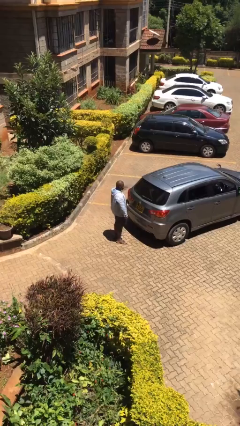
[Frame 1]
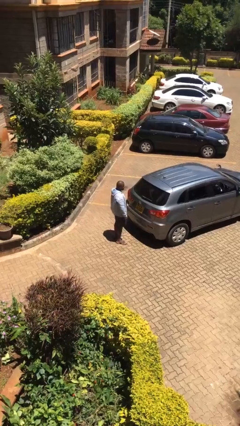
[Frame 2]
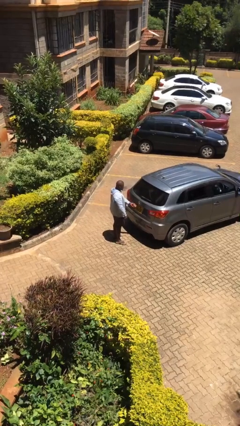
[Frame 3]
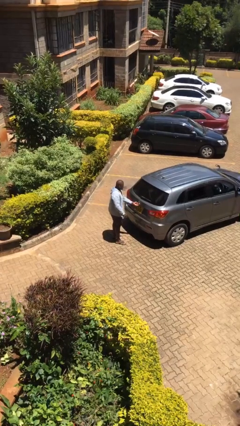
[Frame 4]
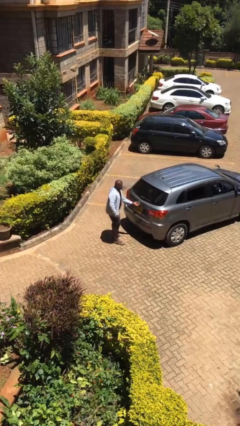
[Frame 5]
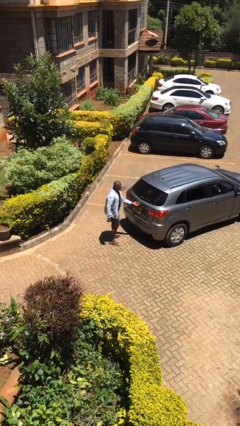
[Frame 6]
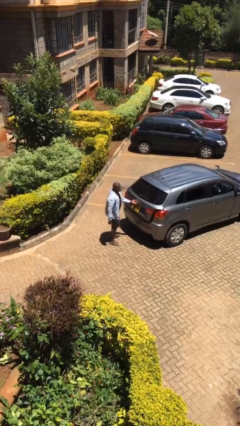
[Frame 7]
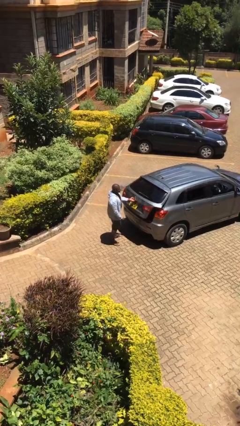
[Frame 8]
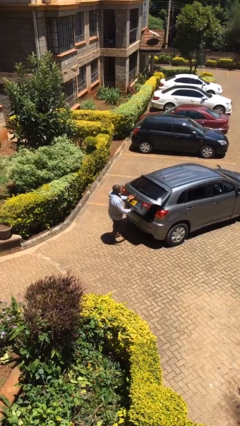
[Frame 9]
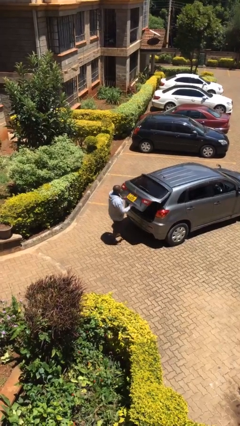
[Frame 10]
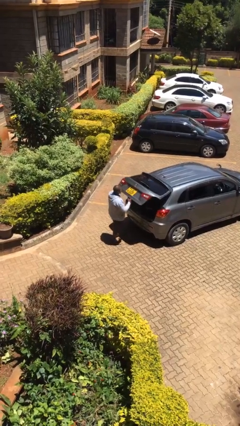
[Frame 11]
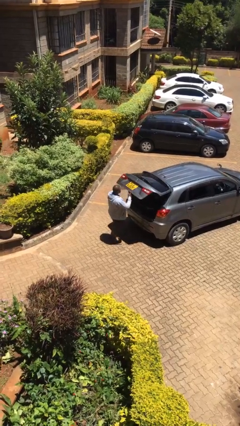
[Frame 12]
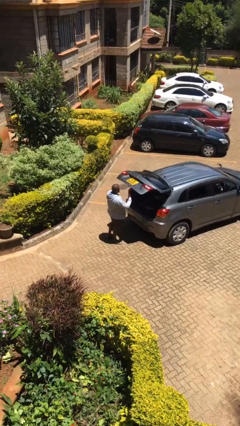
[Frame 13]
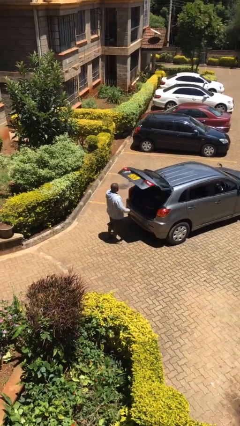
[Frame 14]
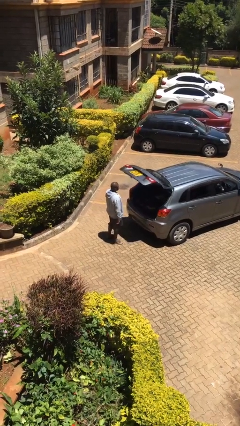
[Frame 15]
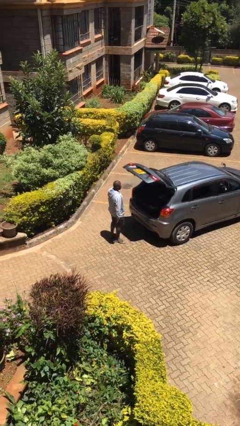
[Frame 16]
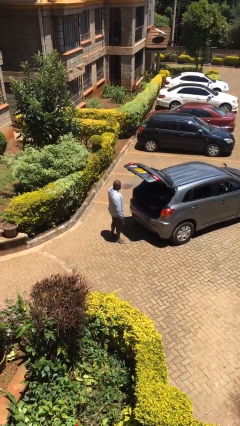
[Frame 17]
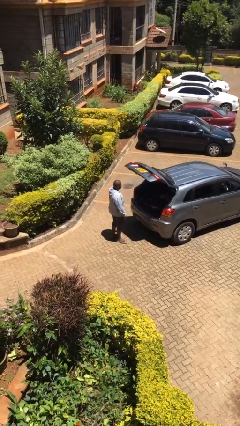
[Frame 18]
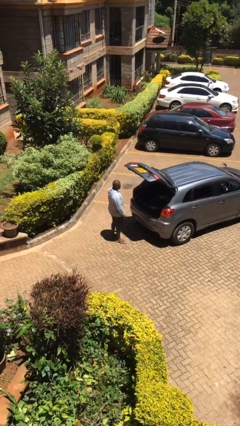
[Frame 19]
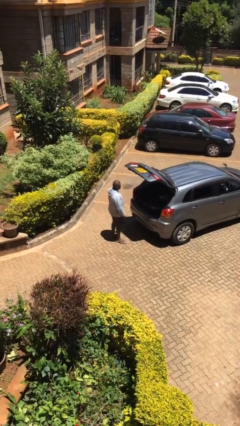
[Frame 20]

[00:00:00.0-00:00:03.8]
person opens car trunk

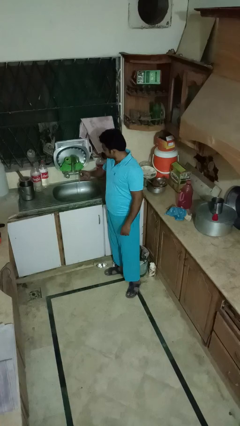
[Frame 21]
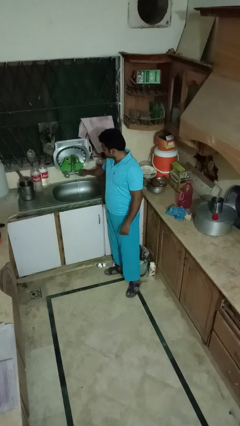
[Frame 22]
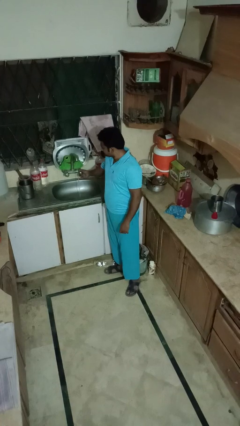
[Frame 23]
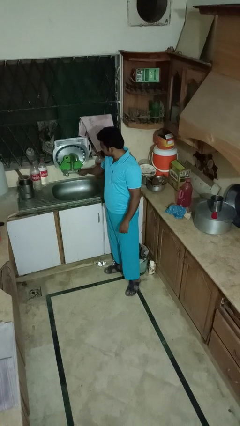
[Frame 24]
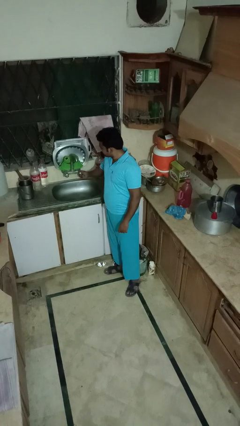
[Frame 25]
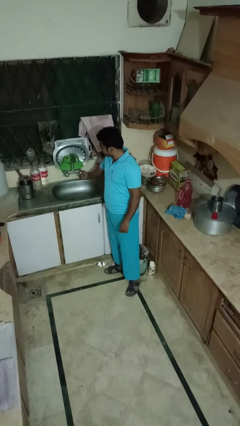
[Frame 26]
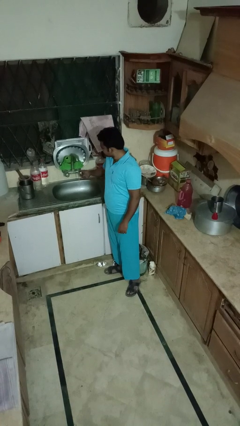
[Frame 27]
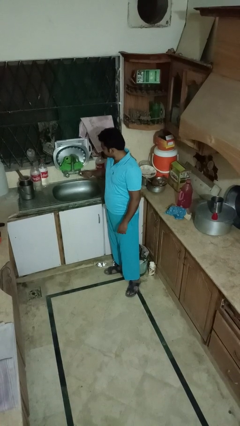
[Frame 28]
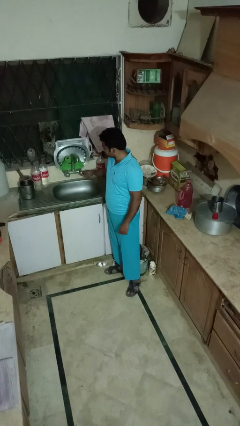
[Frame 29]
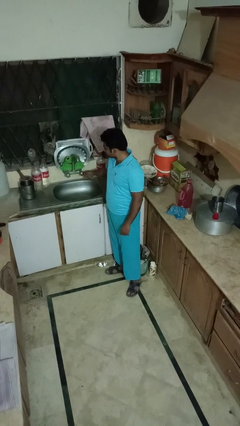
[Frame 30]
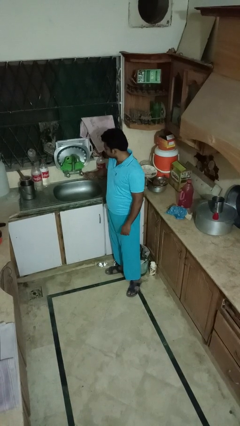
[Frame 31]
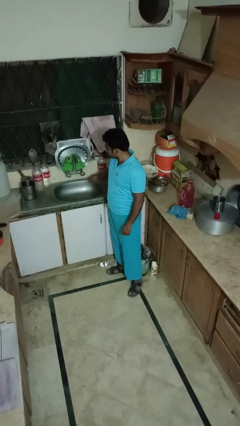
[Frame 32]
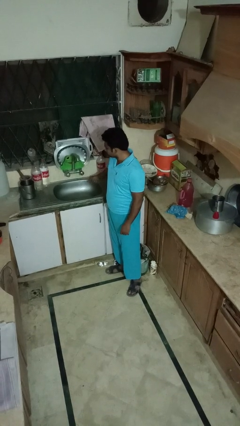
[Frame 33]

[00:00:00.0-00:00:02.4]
person turns off faucet

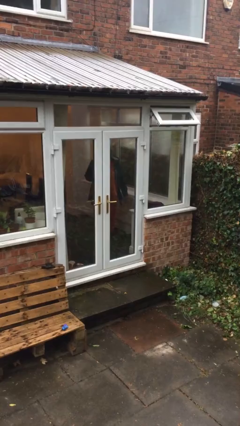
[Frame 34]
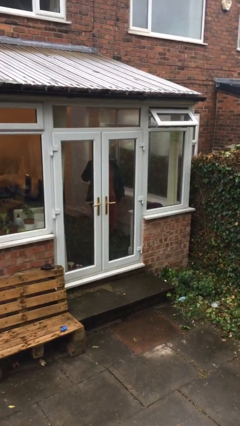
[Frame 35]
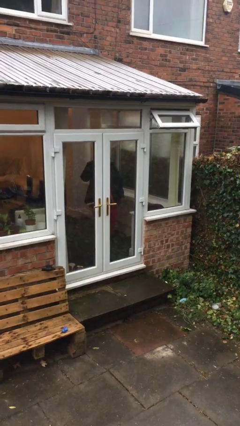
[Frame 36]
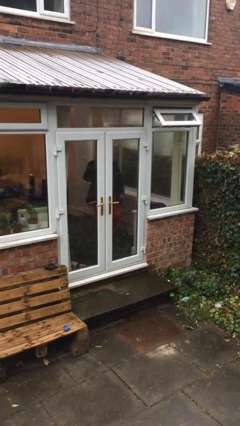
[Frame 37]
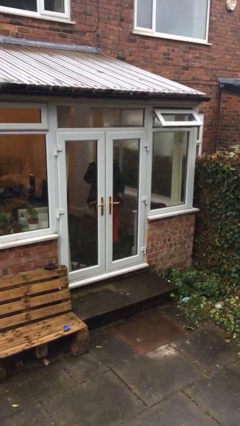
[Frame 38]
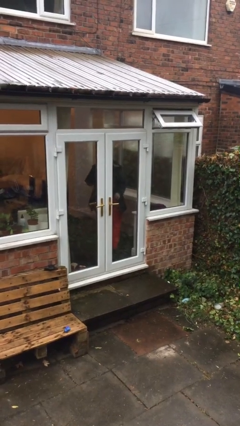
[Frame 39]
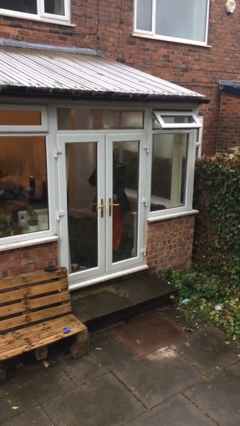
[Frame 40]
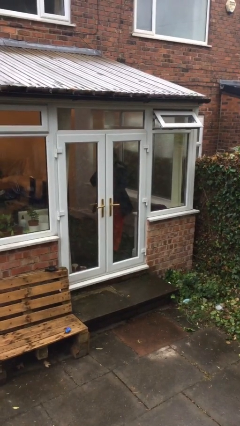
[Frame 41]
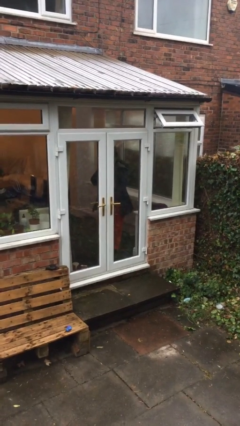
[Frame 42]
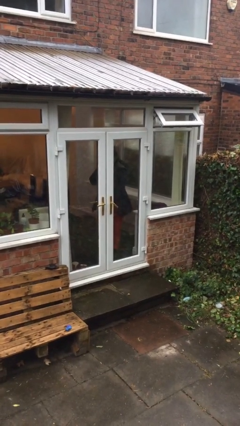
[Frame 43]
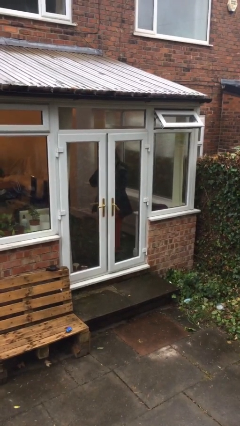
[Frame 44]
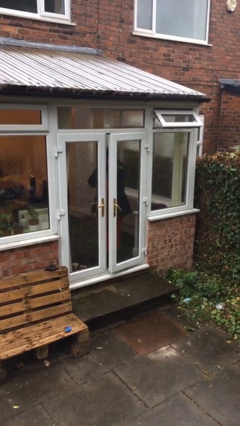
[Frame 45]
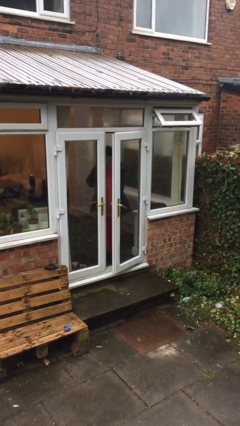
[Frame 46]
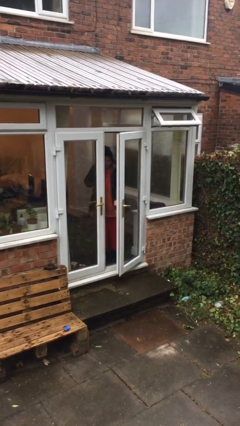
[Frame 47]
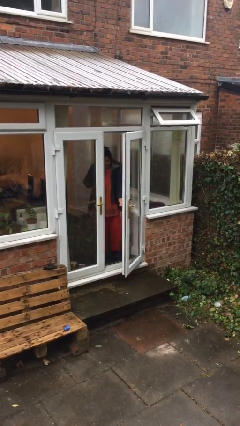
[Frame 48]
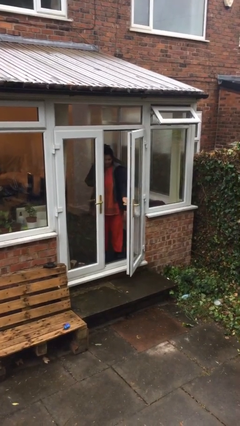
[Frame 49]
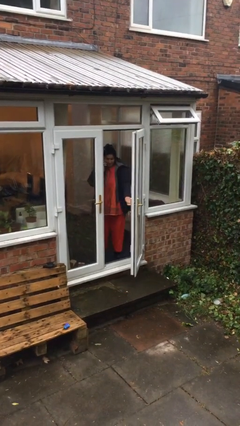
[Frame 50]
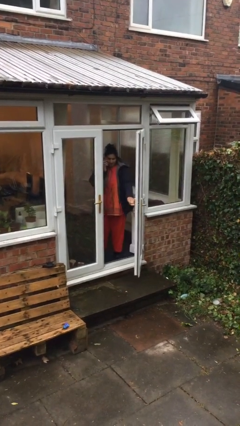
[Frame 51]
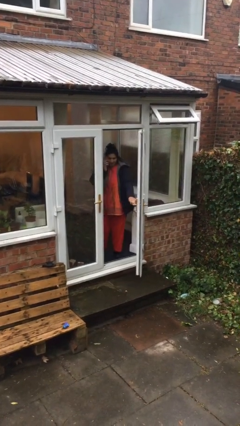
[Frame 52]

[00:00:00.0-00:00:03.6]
person opens facility door

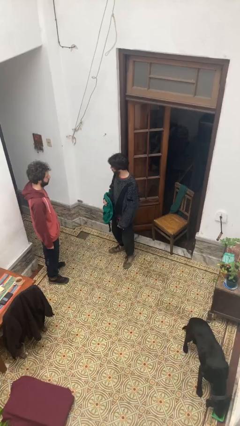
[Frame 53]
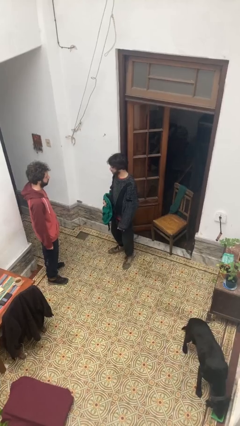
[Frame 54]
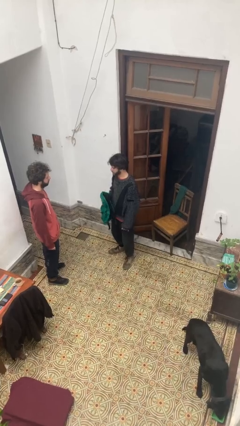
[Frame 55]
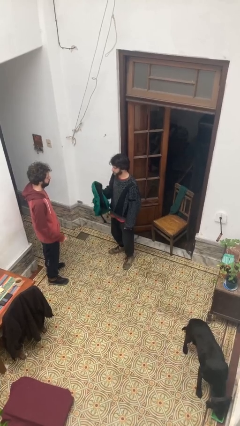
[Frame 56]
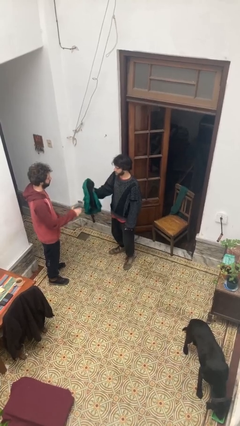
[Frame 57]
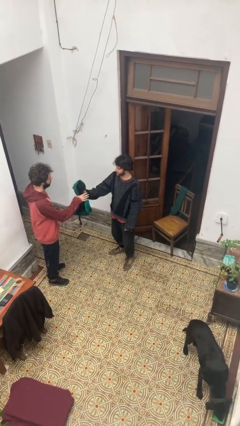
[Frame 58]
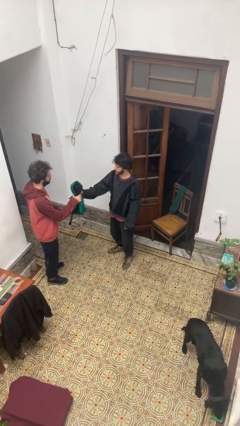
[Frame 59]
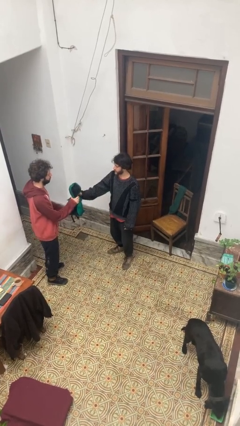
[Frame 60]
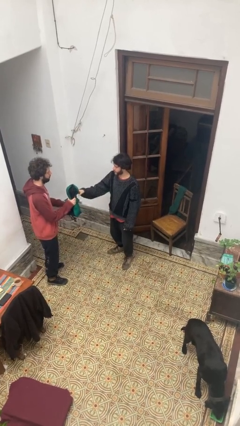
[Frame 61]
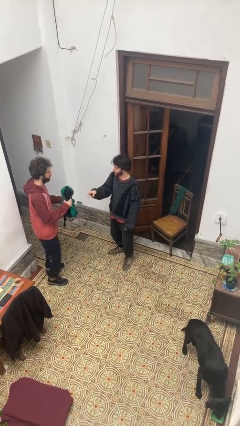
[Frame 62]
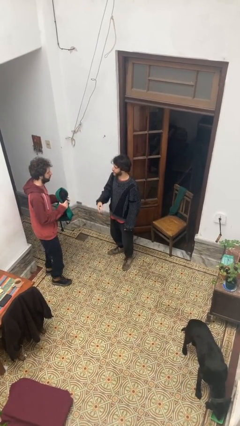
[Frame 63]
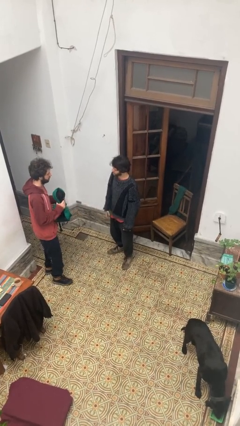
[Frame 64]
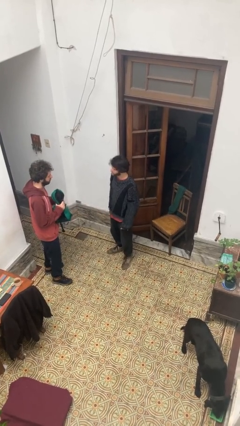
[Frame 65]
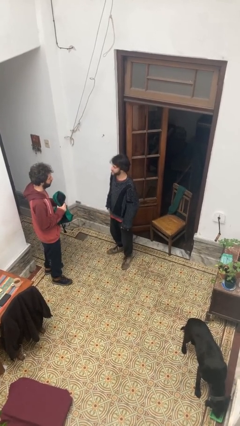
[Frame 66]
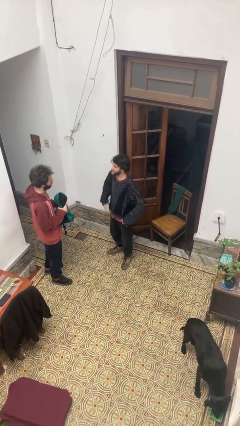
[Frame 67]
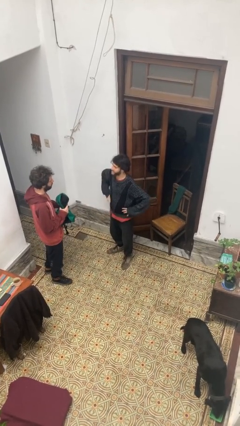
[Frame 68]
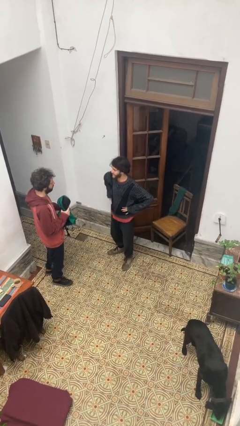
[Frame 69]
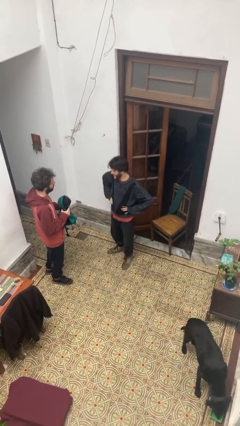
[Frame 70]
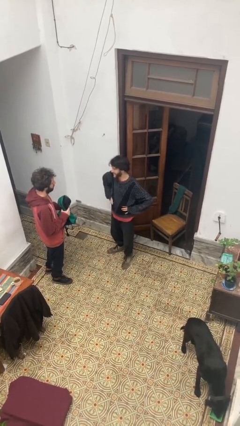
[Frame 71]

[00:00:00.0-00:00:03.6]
person transfers object to person

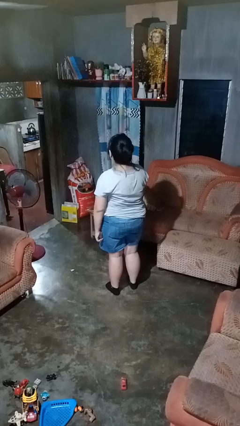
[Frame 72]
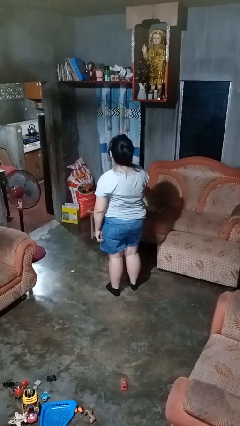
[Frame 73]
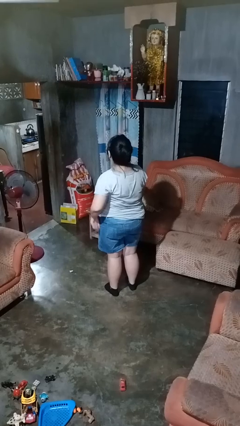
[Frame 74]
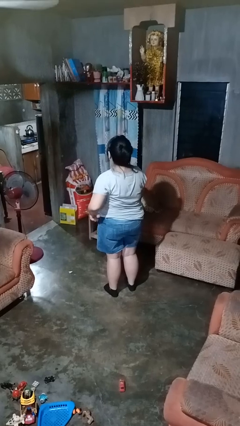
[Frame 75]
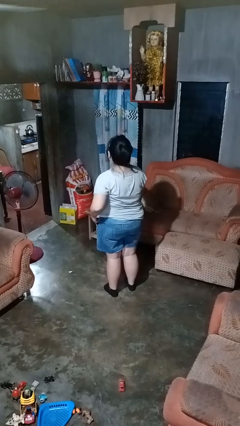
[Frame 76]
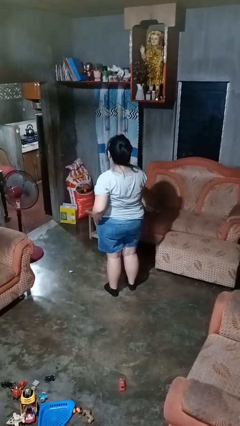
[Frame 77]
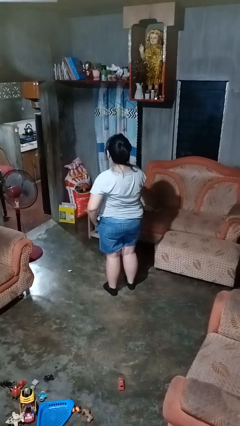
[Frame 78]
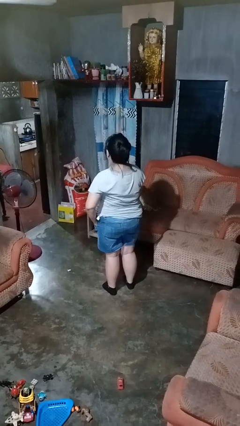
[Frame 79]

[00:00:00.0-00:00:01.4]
person puts hands in back pockets

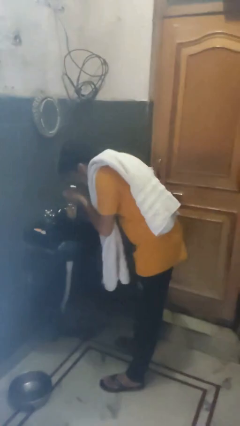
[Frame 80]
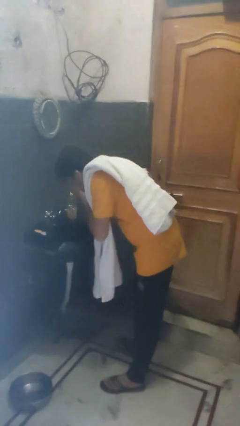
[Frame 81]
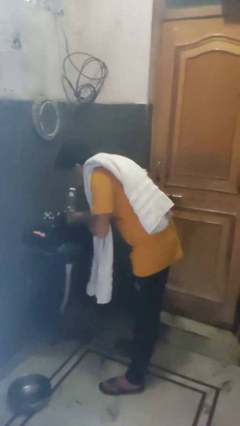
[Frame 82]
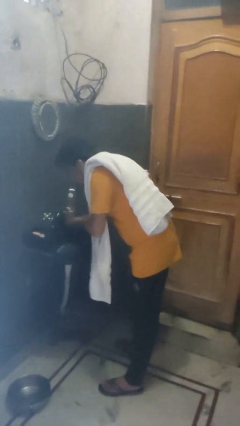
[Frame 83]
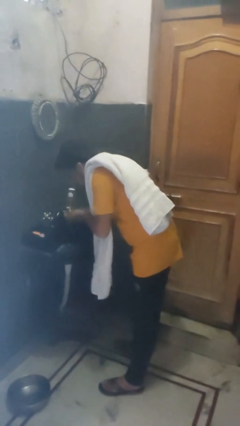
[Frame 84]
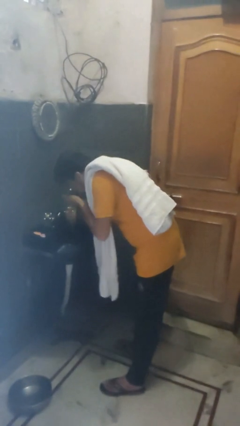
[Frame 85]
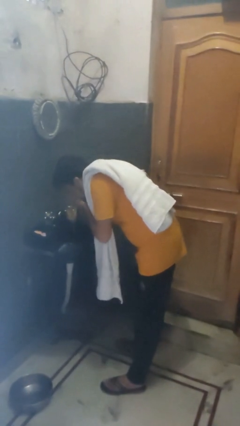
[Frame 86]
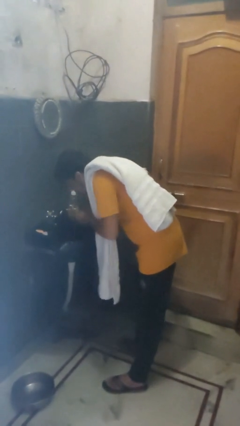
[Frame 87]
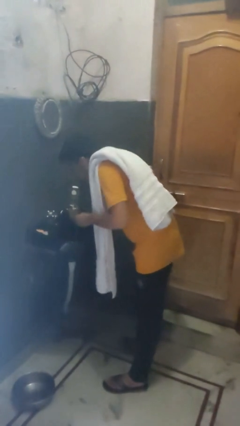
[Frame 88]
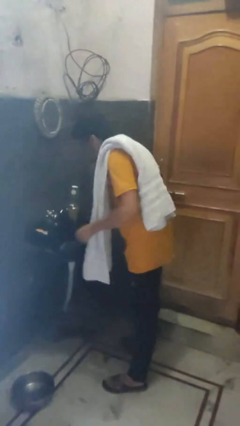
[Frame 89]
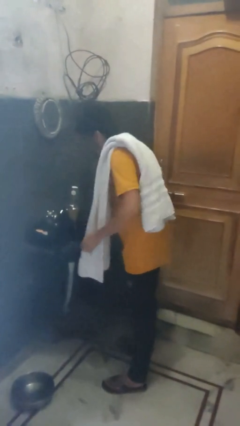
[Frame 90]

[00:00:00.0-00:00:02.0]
person washes face

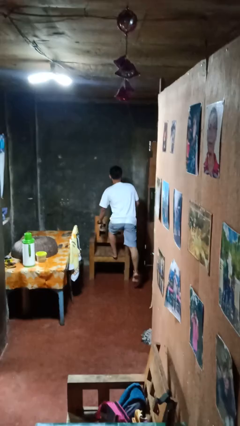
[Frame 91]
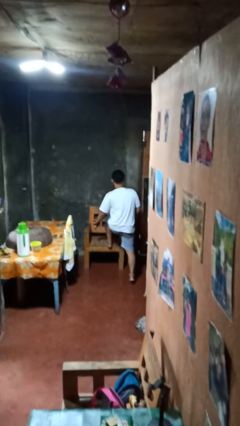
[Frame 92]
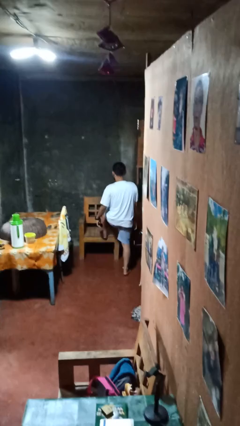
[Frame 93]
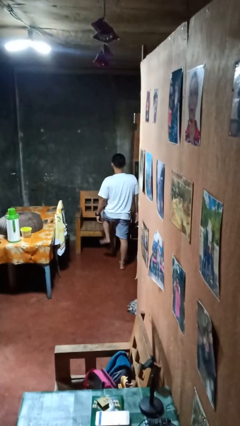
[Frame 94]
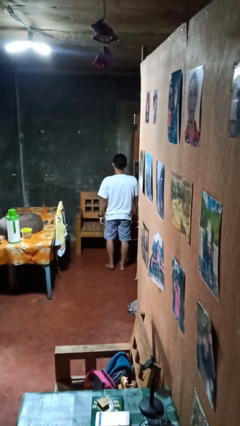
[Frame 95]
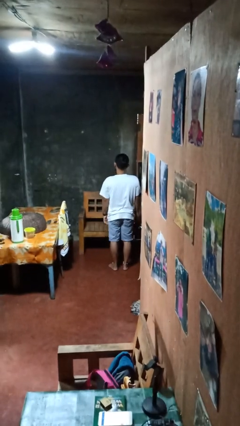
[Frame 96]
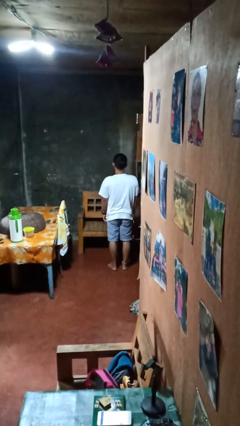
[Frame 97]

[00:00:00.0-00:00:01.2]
person climbs off chair
